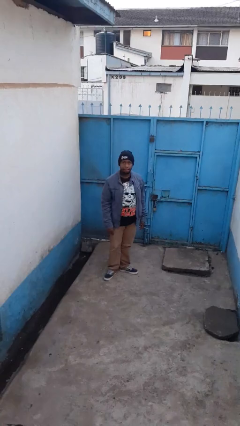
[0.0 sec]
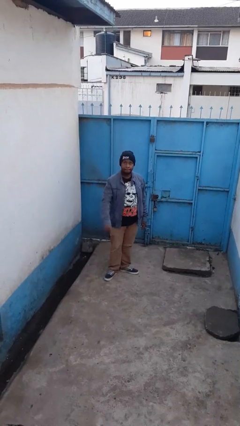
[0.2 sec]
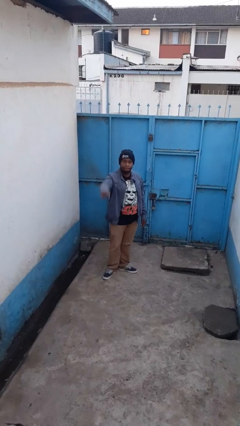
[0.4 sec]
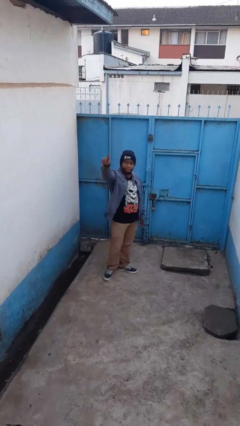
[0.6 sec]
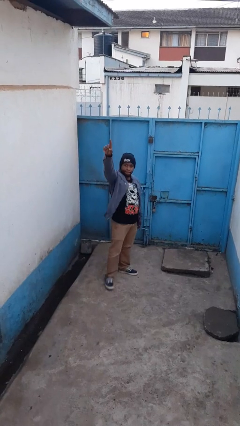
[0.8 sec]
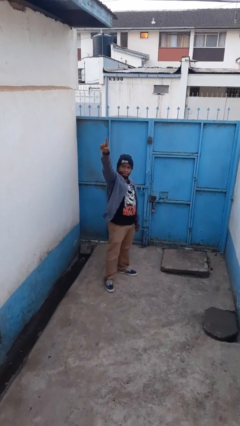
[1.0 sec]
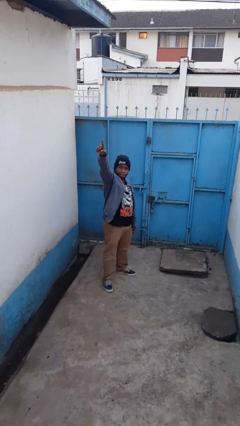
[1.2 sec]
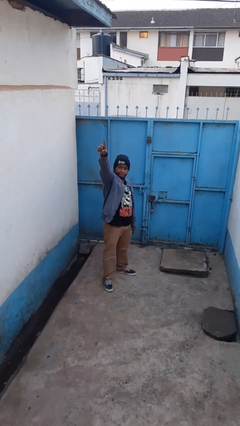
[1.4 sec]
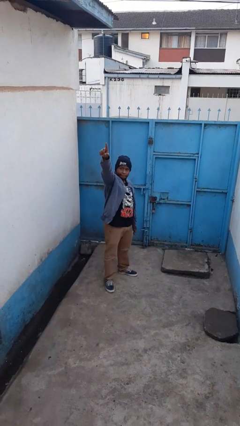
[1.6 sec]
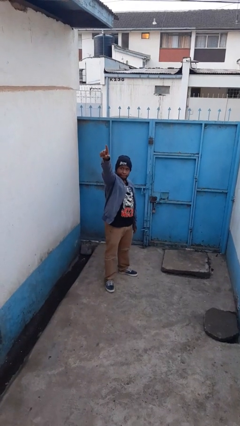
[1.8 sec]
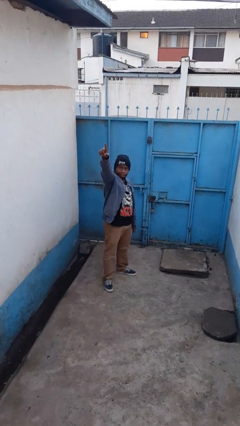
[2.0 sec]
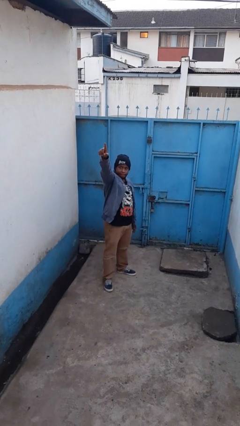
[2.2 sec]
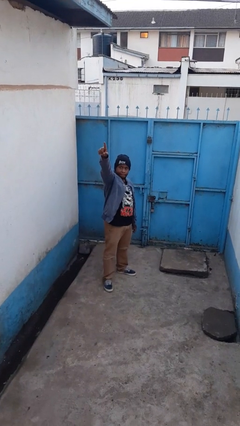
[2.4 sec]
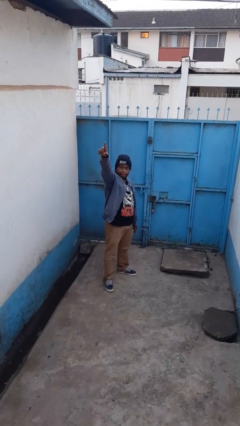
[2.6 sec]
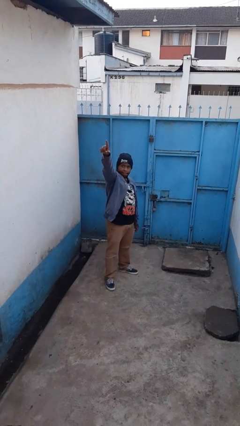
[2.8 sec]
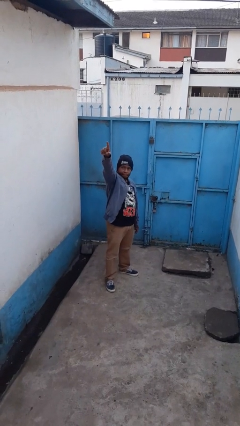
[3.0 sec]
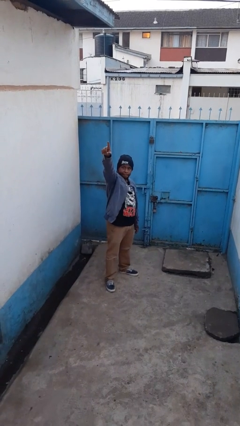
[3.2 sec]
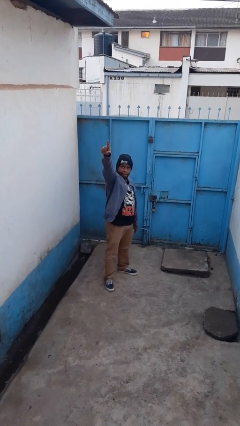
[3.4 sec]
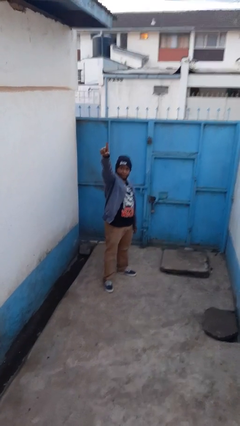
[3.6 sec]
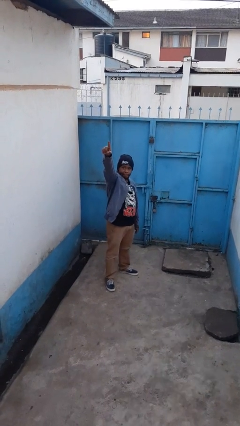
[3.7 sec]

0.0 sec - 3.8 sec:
person points at person

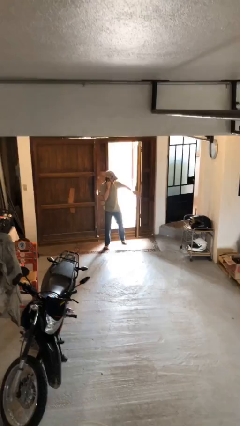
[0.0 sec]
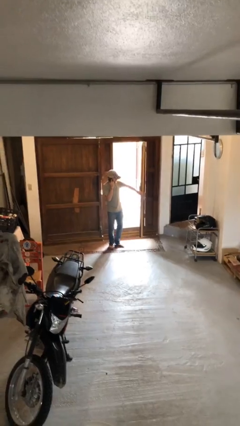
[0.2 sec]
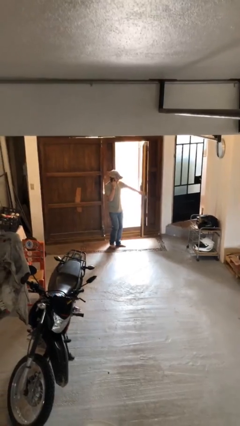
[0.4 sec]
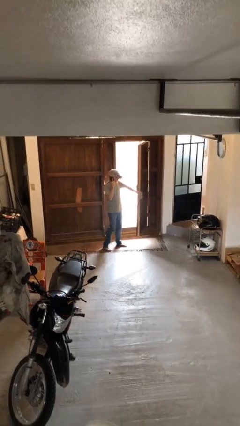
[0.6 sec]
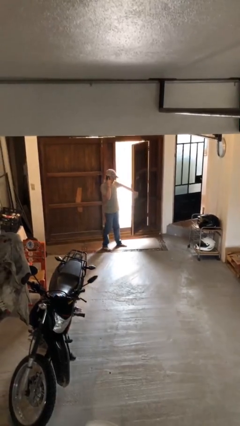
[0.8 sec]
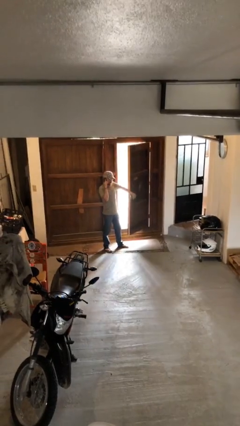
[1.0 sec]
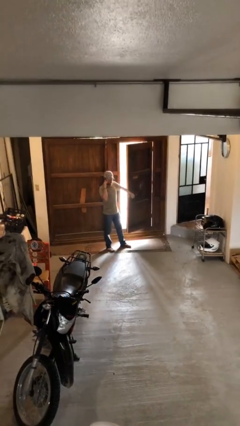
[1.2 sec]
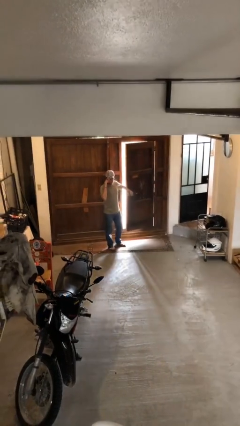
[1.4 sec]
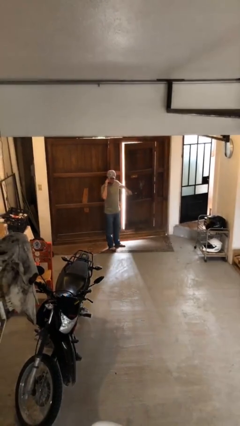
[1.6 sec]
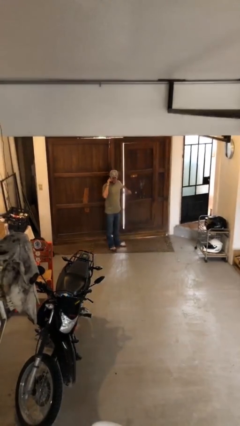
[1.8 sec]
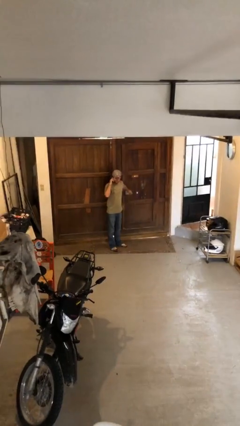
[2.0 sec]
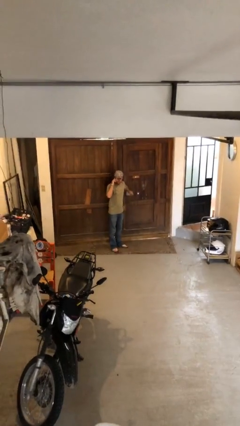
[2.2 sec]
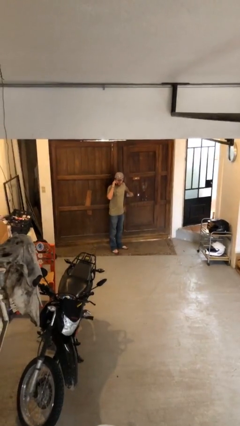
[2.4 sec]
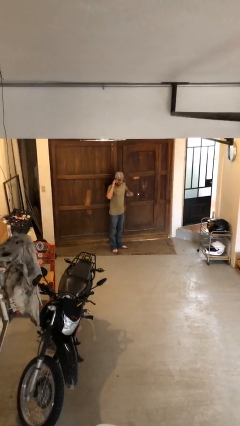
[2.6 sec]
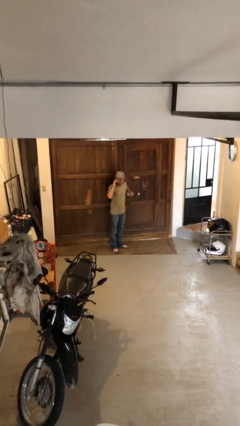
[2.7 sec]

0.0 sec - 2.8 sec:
person closes facility door

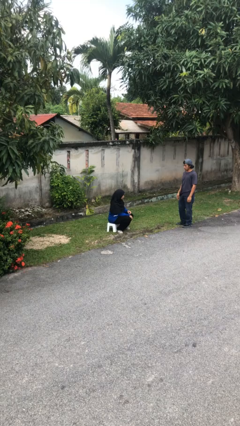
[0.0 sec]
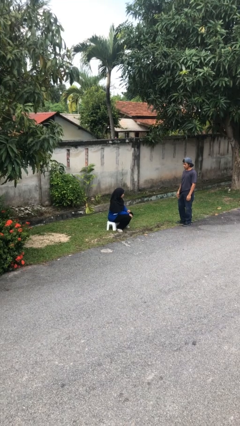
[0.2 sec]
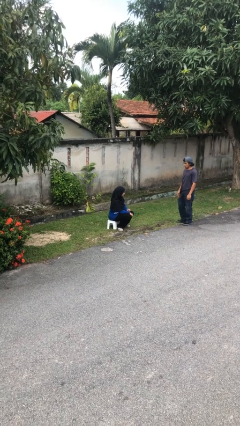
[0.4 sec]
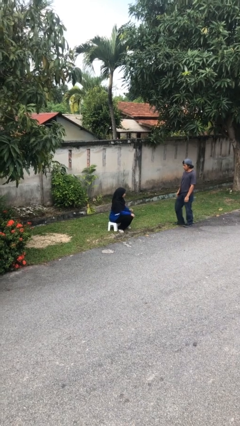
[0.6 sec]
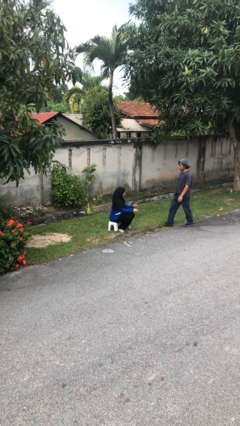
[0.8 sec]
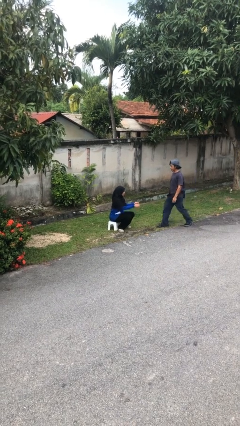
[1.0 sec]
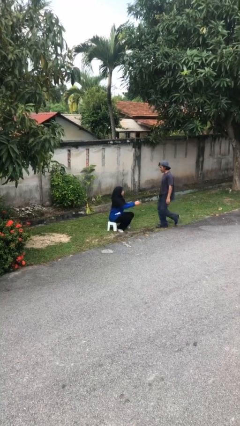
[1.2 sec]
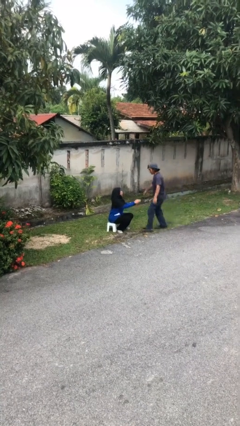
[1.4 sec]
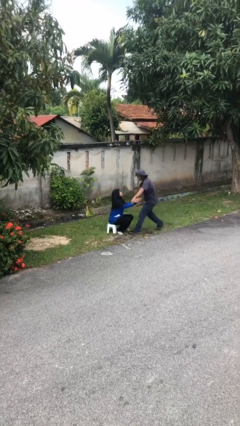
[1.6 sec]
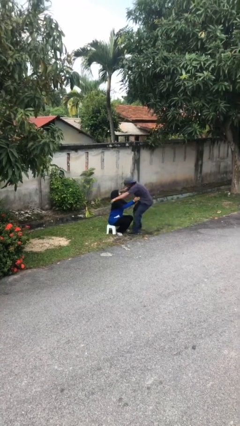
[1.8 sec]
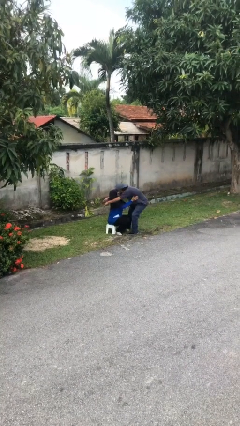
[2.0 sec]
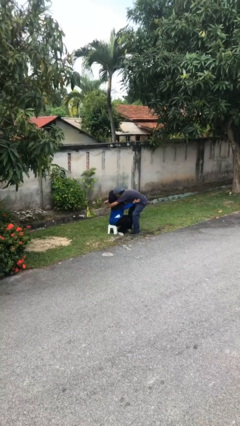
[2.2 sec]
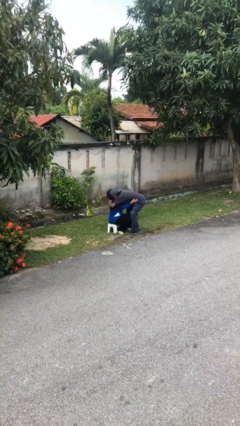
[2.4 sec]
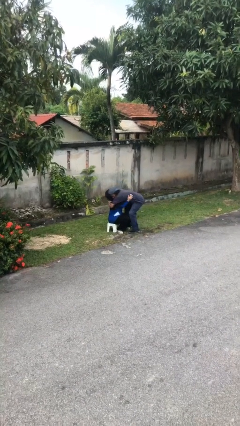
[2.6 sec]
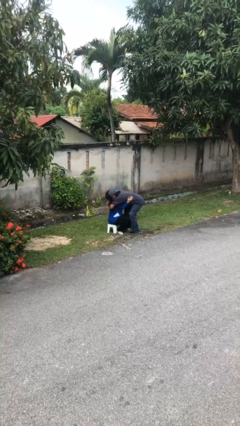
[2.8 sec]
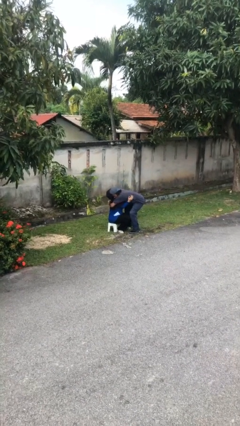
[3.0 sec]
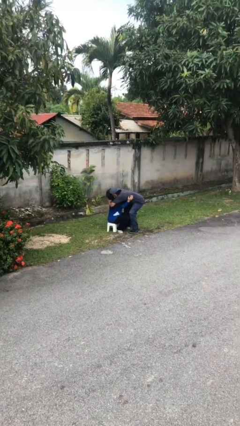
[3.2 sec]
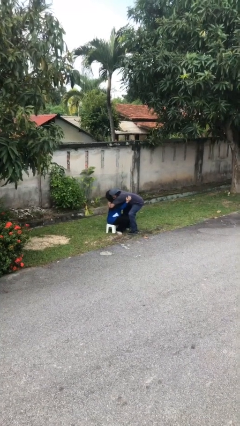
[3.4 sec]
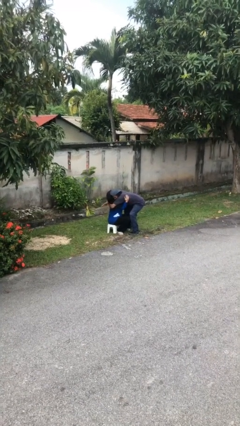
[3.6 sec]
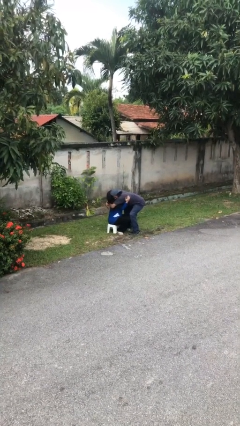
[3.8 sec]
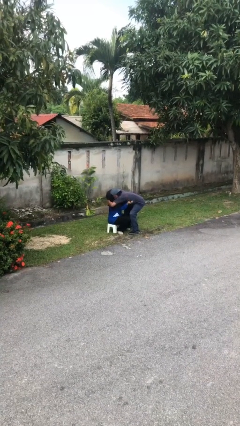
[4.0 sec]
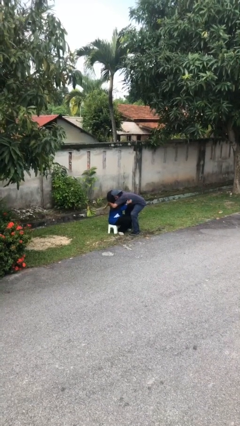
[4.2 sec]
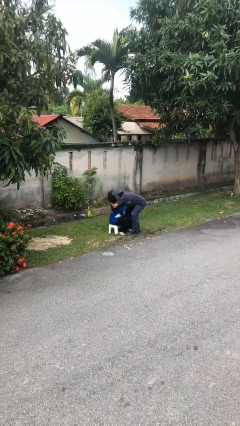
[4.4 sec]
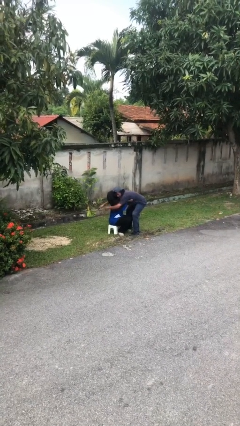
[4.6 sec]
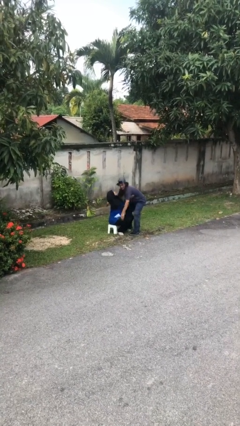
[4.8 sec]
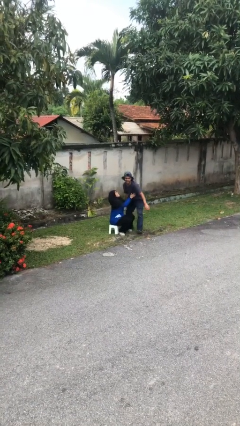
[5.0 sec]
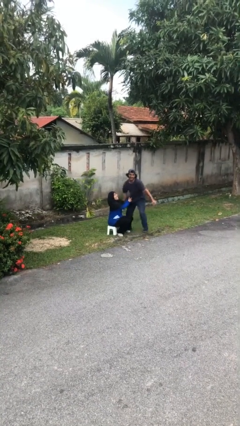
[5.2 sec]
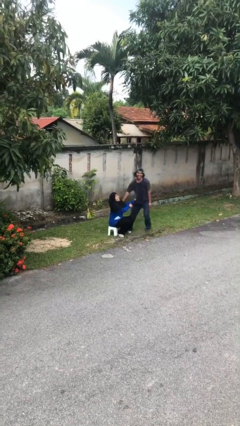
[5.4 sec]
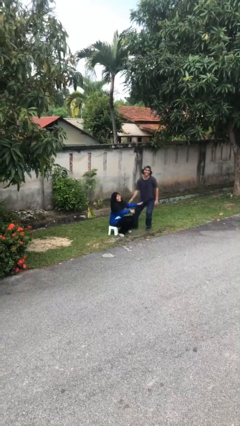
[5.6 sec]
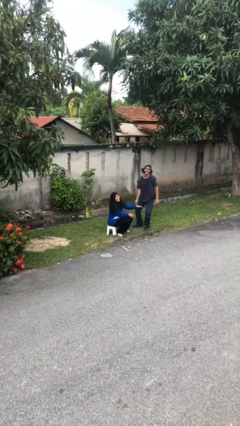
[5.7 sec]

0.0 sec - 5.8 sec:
person embraces person

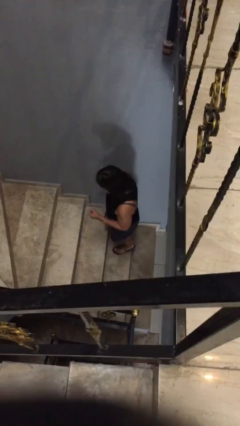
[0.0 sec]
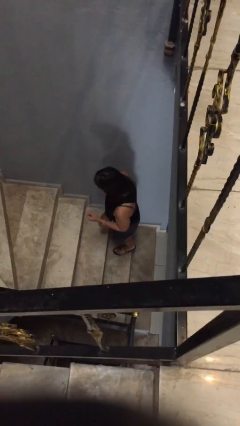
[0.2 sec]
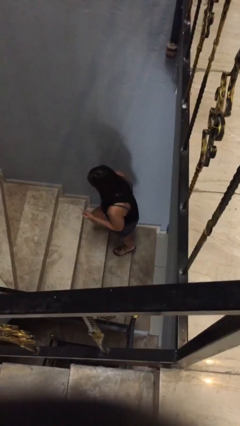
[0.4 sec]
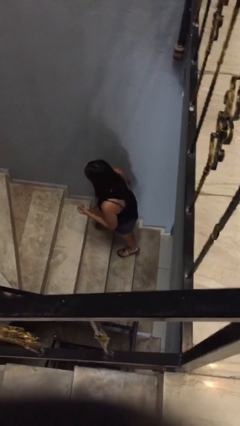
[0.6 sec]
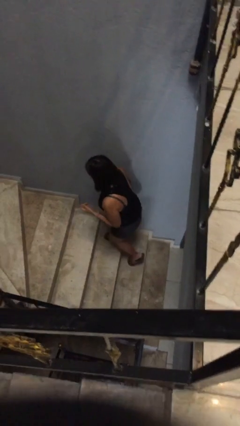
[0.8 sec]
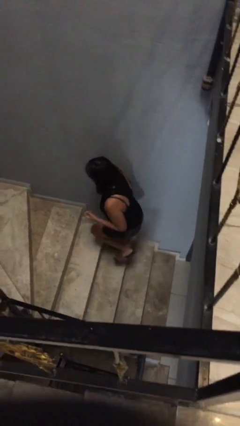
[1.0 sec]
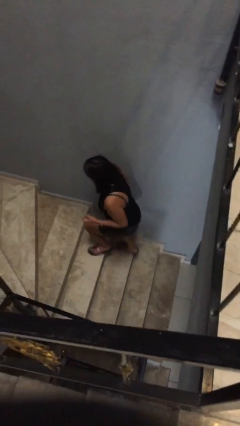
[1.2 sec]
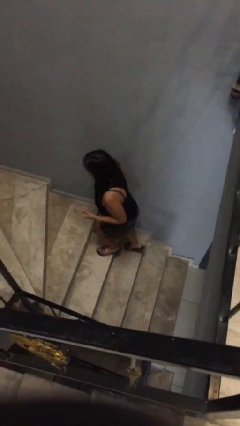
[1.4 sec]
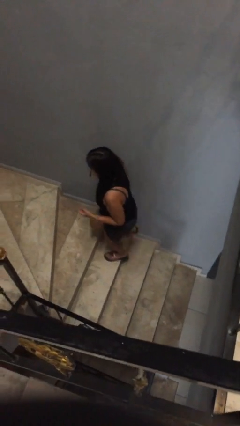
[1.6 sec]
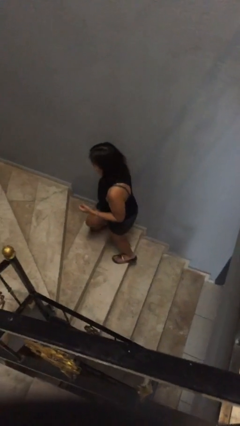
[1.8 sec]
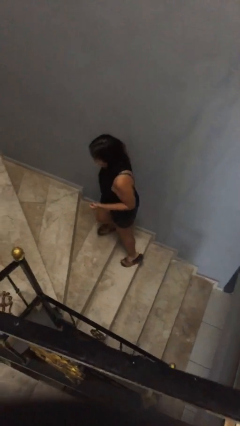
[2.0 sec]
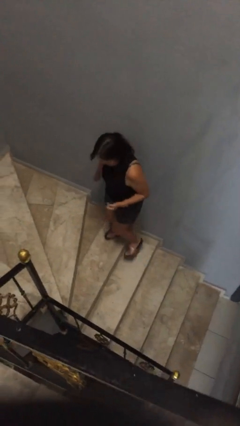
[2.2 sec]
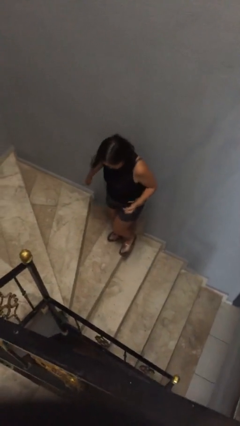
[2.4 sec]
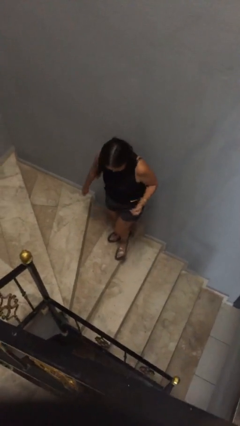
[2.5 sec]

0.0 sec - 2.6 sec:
person climbs up stairs

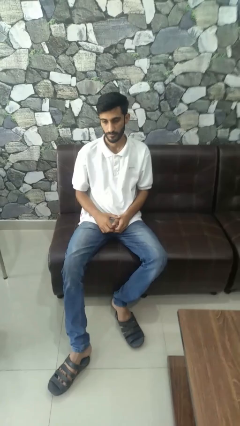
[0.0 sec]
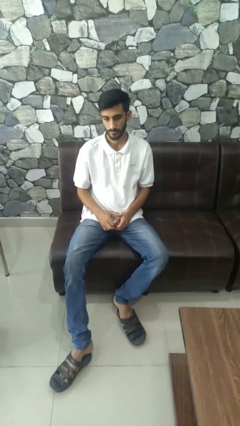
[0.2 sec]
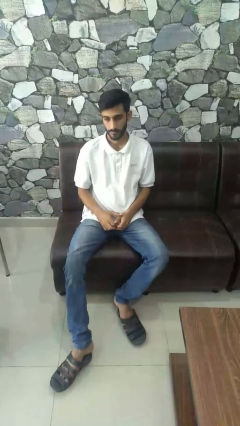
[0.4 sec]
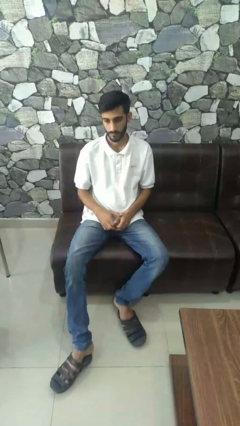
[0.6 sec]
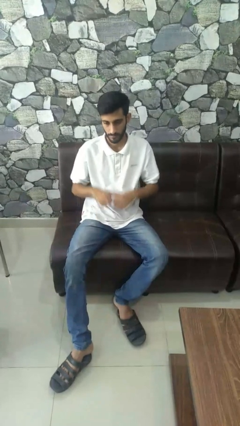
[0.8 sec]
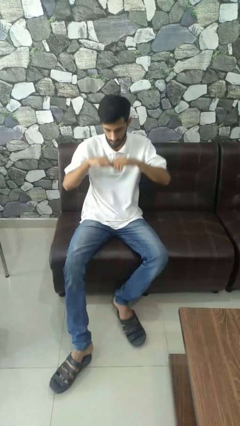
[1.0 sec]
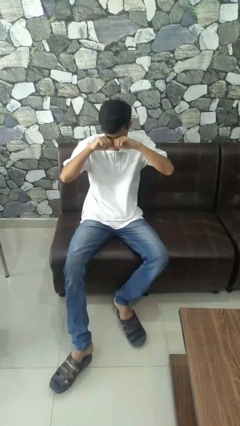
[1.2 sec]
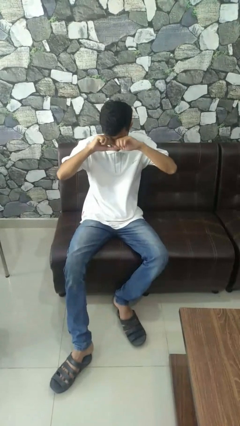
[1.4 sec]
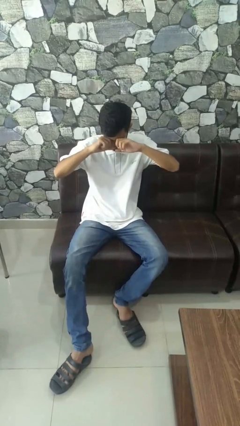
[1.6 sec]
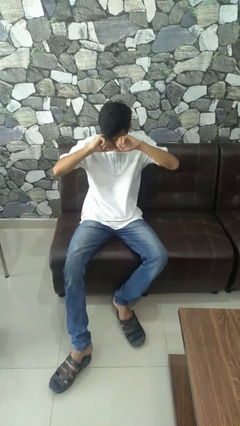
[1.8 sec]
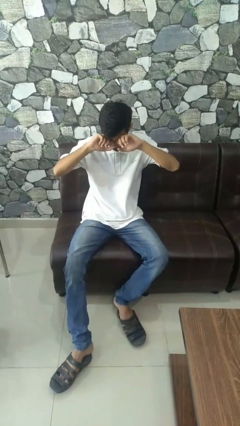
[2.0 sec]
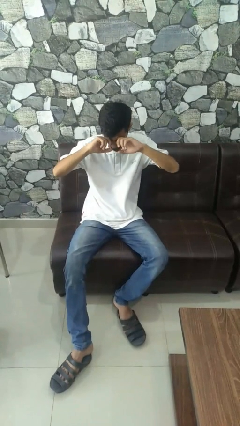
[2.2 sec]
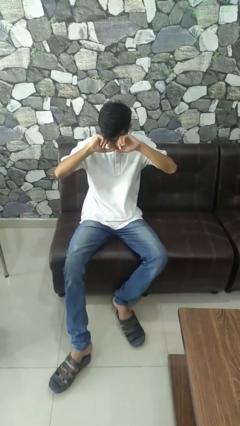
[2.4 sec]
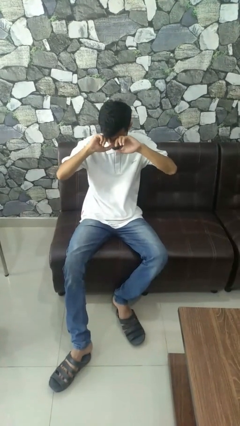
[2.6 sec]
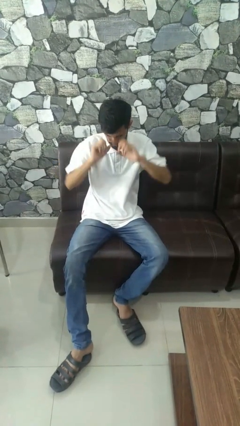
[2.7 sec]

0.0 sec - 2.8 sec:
person rubs eyes
